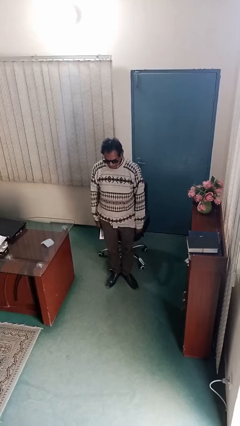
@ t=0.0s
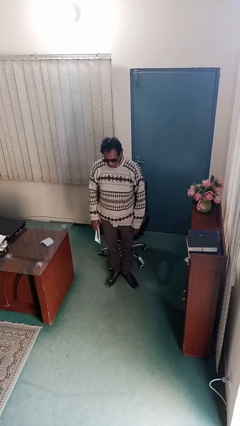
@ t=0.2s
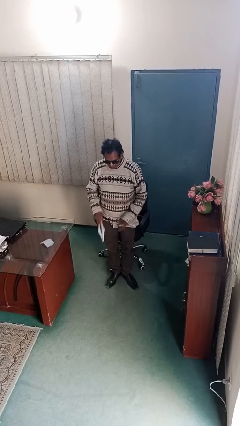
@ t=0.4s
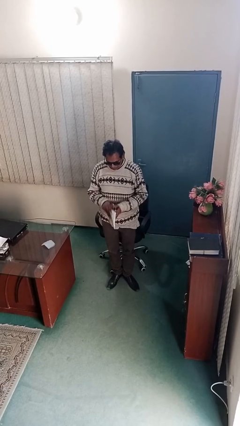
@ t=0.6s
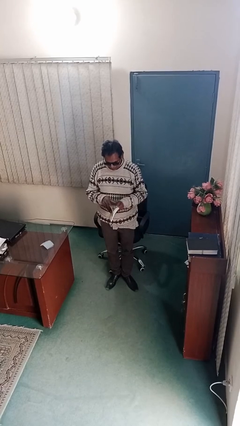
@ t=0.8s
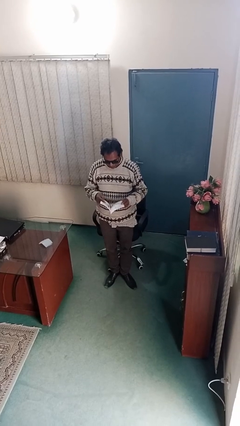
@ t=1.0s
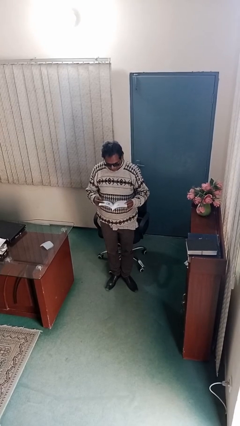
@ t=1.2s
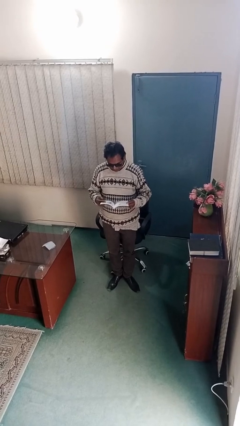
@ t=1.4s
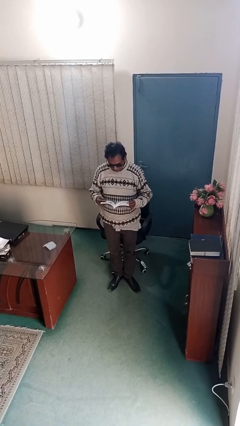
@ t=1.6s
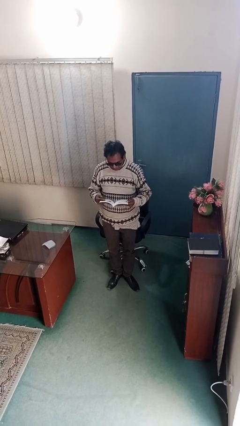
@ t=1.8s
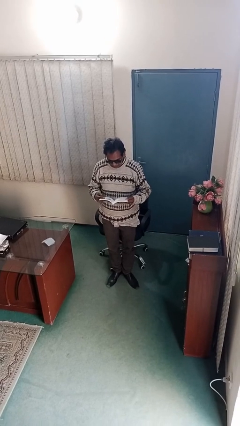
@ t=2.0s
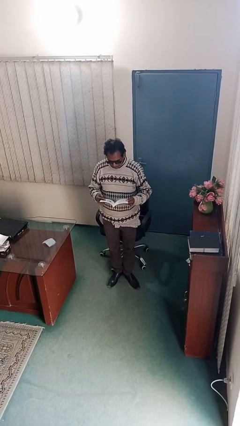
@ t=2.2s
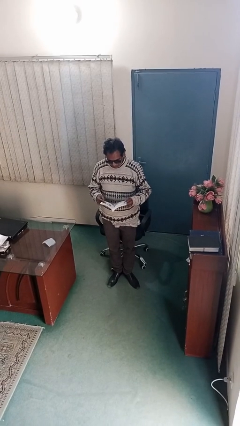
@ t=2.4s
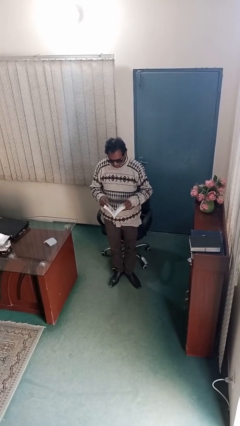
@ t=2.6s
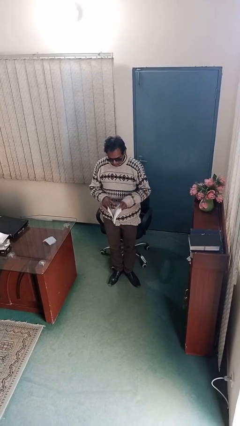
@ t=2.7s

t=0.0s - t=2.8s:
person reads document

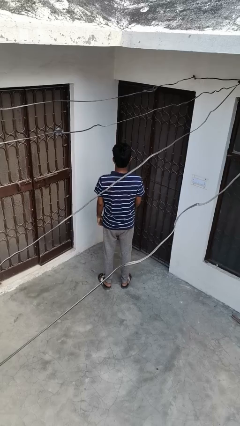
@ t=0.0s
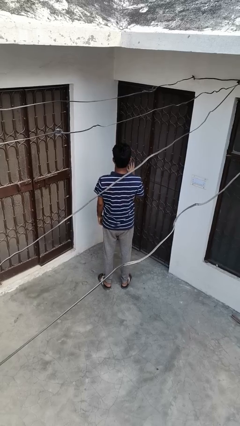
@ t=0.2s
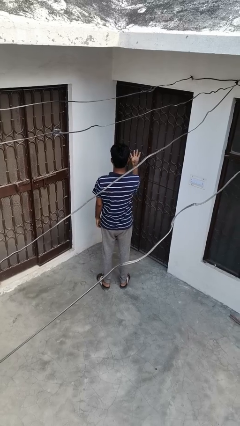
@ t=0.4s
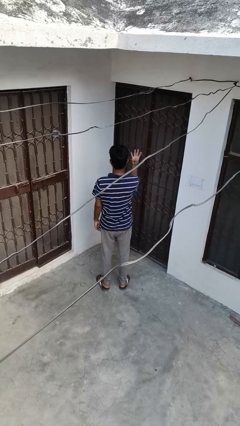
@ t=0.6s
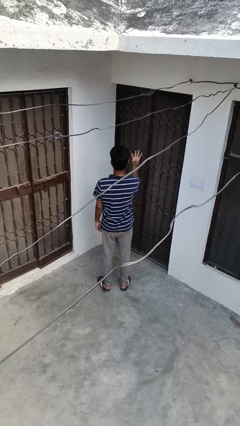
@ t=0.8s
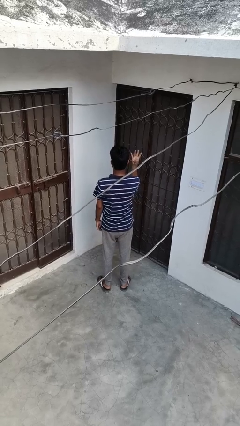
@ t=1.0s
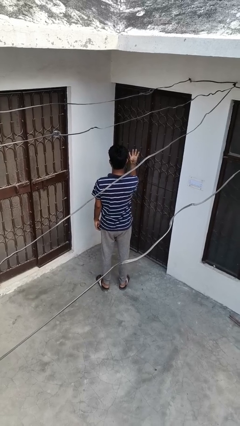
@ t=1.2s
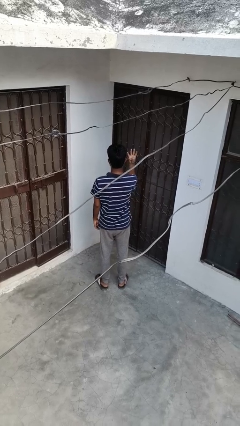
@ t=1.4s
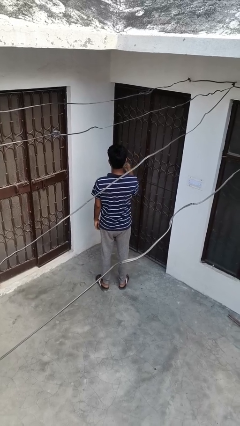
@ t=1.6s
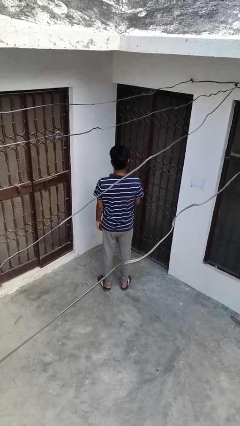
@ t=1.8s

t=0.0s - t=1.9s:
person gestures number four

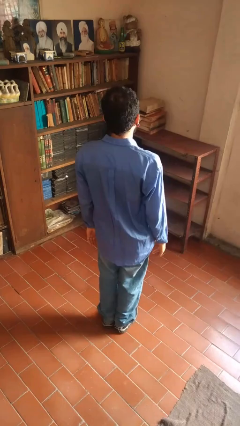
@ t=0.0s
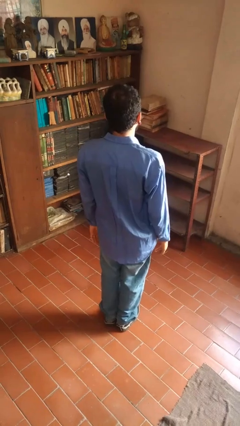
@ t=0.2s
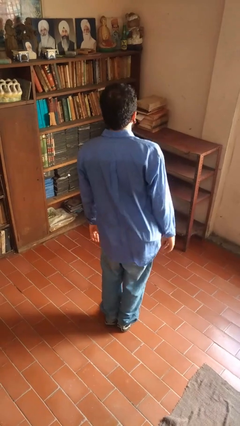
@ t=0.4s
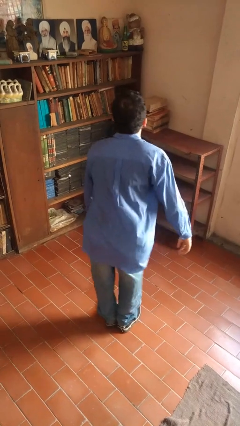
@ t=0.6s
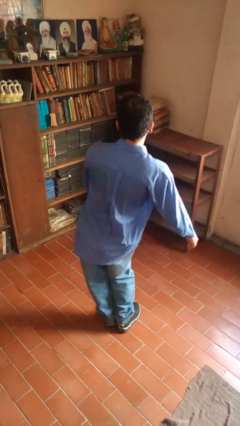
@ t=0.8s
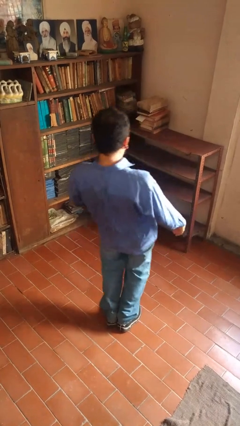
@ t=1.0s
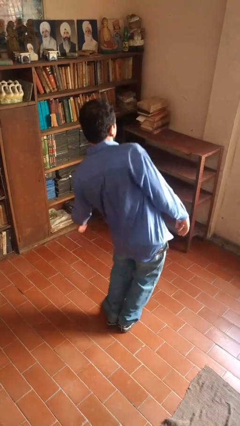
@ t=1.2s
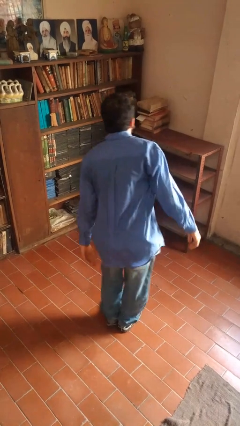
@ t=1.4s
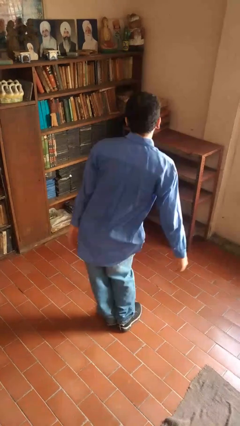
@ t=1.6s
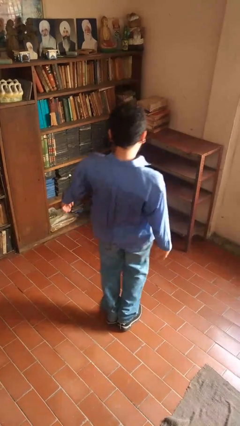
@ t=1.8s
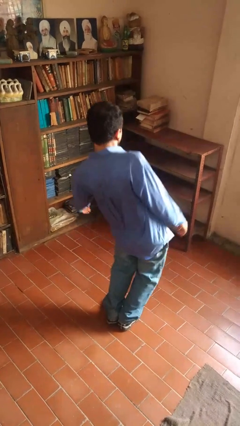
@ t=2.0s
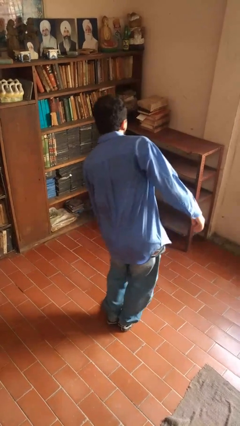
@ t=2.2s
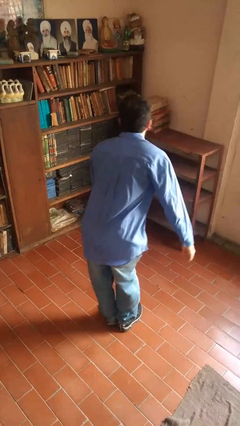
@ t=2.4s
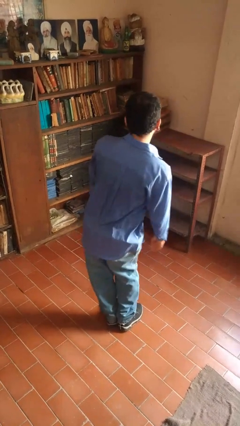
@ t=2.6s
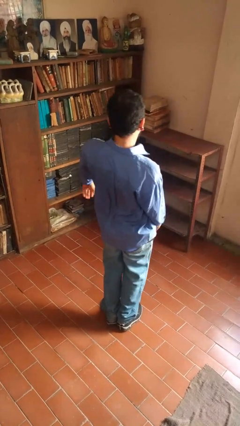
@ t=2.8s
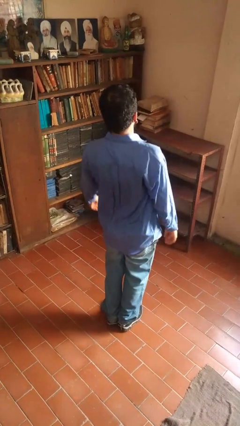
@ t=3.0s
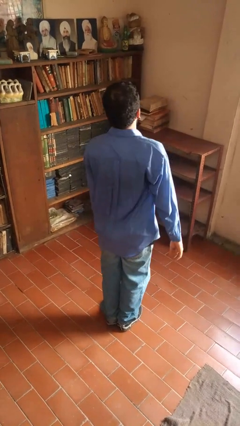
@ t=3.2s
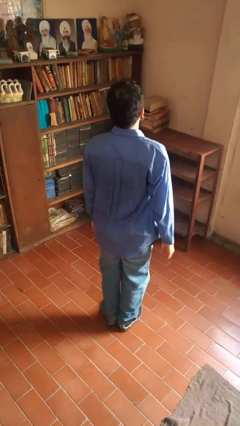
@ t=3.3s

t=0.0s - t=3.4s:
person wiggles hips

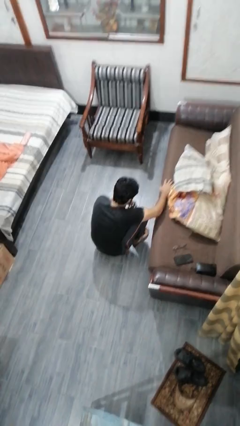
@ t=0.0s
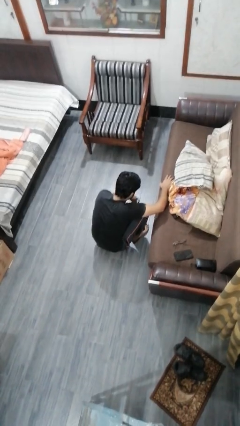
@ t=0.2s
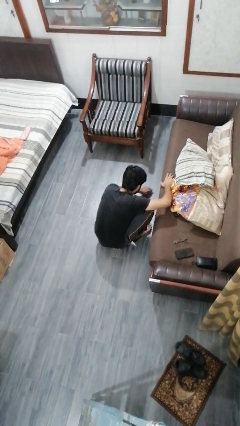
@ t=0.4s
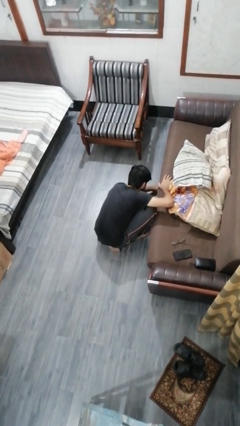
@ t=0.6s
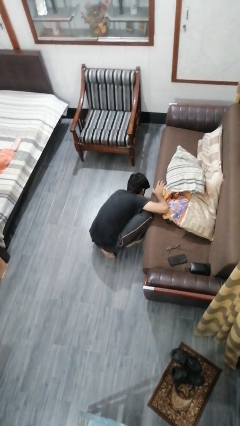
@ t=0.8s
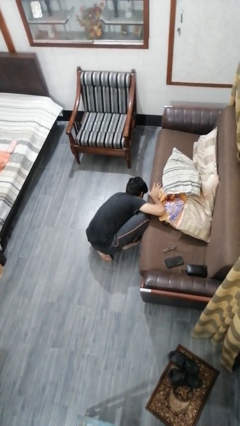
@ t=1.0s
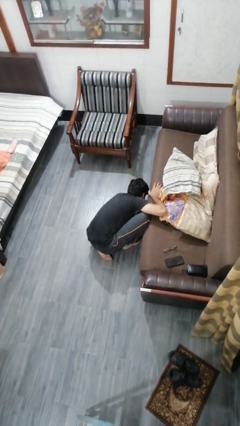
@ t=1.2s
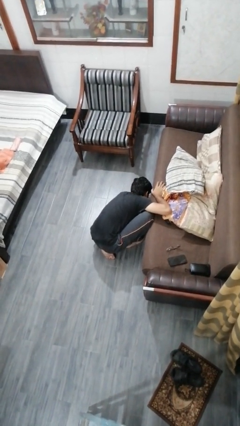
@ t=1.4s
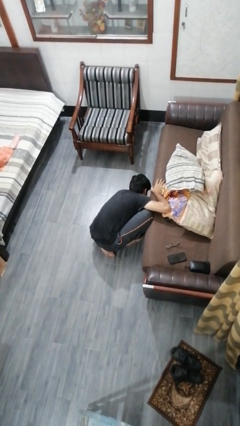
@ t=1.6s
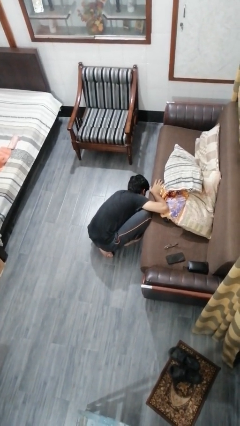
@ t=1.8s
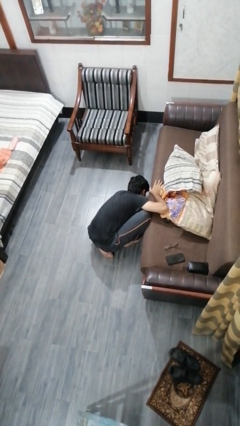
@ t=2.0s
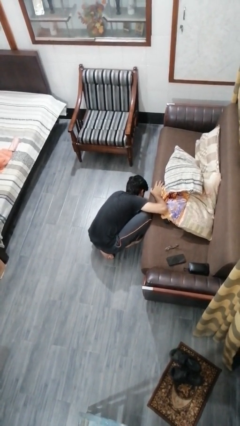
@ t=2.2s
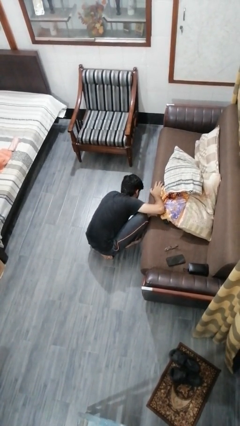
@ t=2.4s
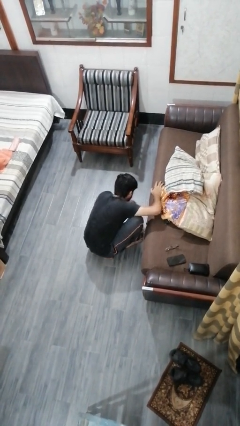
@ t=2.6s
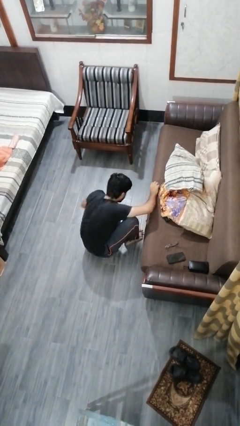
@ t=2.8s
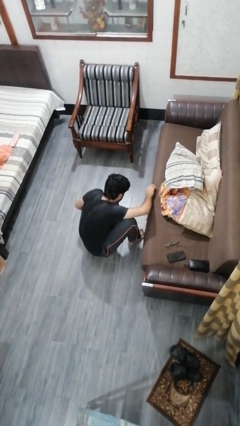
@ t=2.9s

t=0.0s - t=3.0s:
person searches under couch

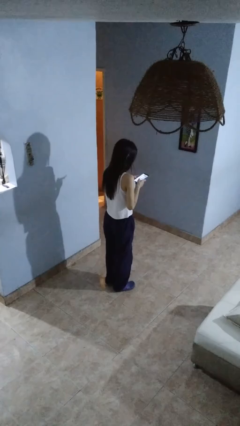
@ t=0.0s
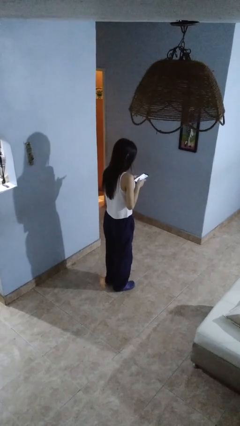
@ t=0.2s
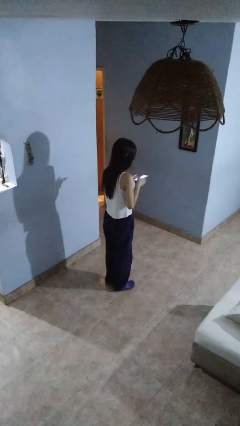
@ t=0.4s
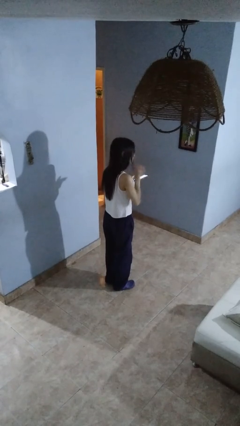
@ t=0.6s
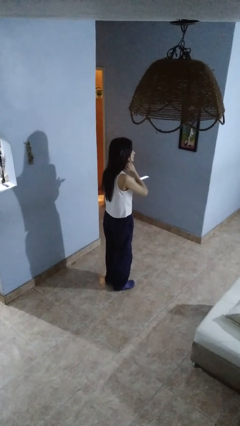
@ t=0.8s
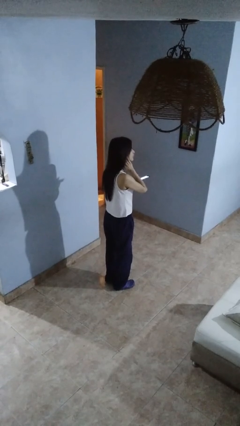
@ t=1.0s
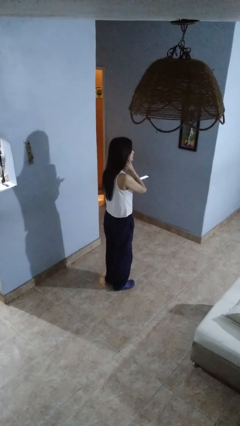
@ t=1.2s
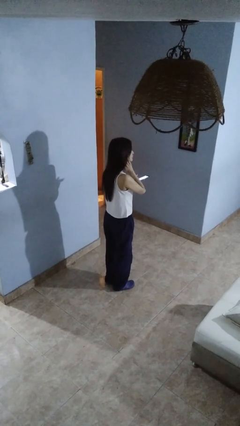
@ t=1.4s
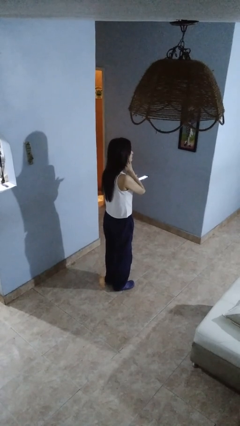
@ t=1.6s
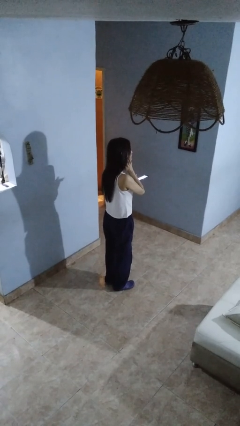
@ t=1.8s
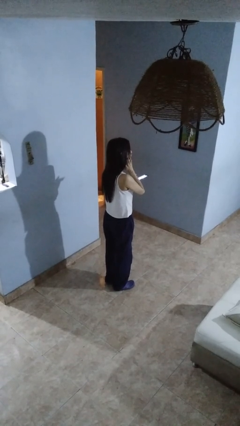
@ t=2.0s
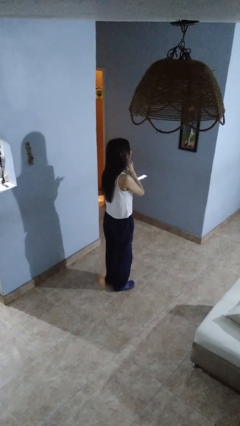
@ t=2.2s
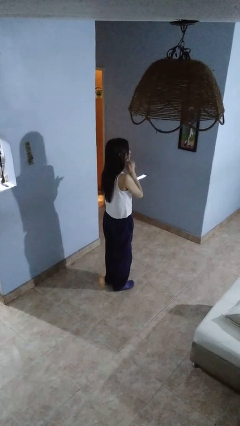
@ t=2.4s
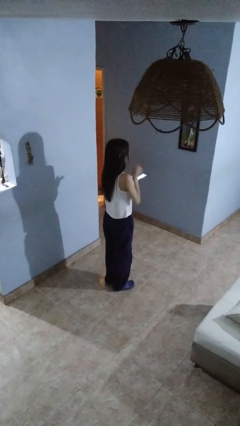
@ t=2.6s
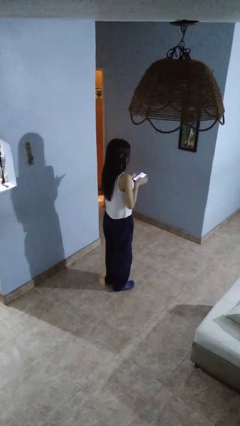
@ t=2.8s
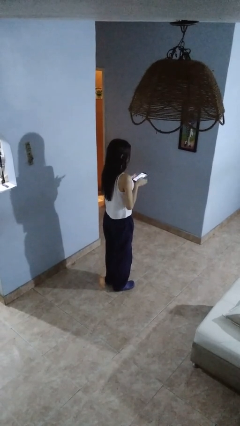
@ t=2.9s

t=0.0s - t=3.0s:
person scratches face

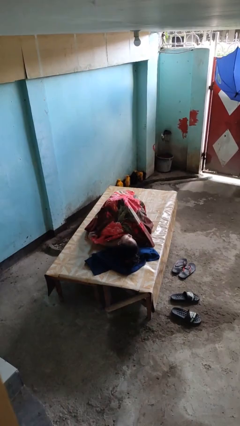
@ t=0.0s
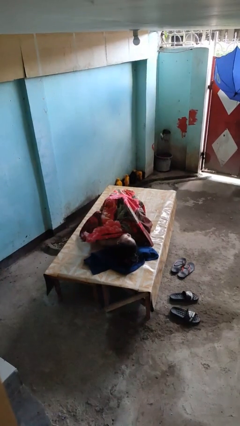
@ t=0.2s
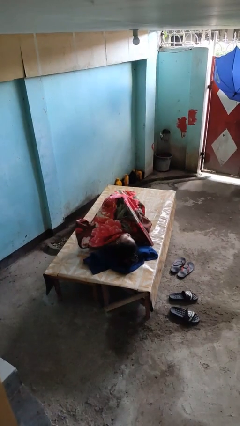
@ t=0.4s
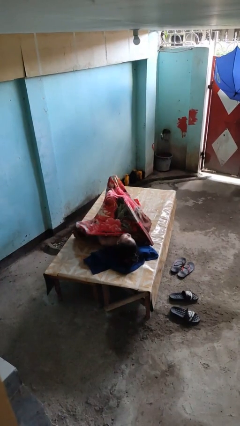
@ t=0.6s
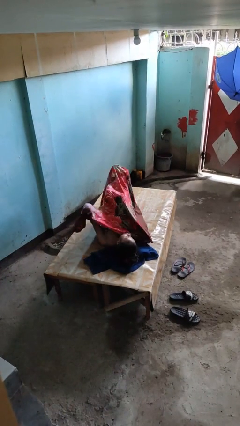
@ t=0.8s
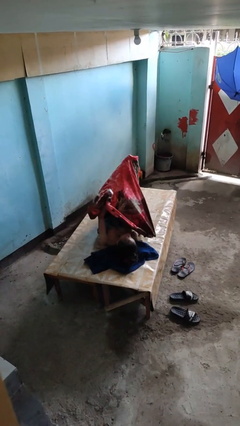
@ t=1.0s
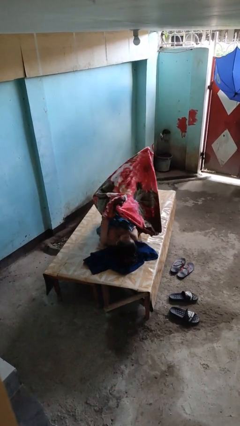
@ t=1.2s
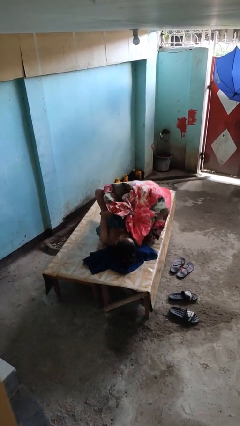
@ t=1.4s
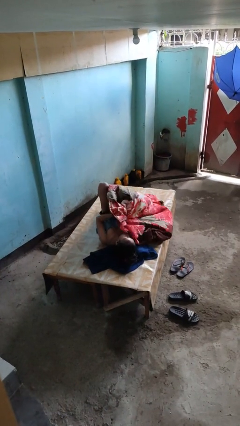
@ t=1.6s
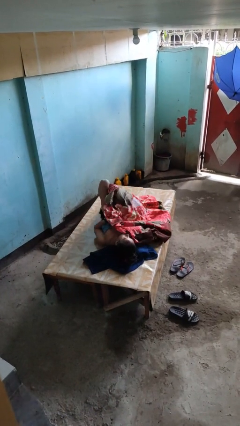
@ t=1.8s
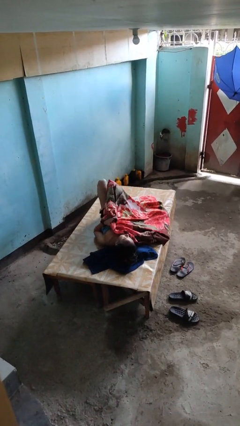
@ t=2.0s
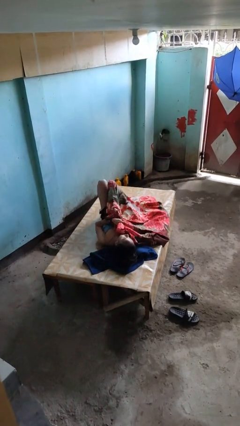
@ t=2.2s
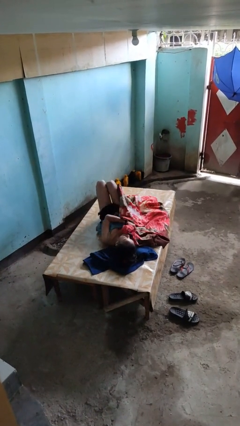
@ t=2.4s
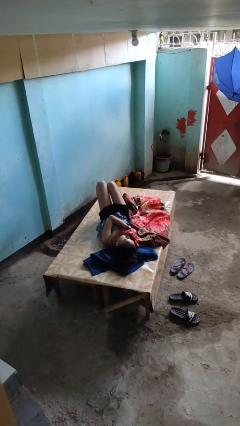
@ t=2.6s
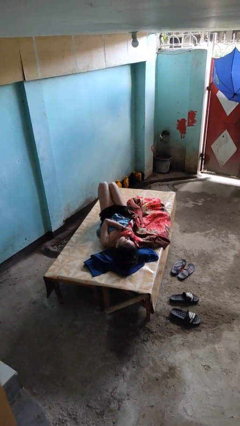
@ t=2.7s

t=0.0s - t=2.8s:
person uncovers with blanket

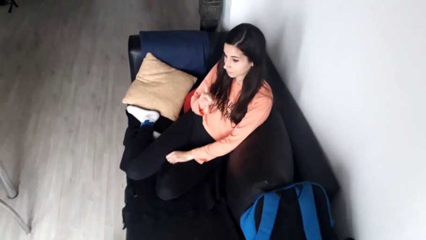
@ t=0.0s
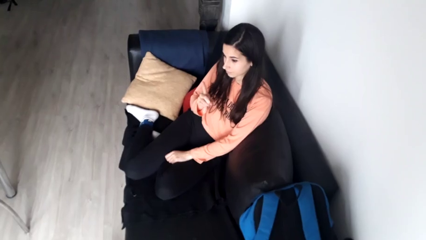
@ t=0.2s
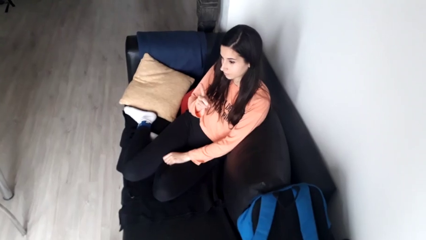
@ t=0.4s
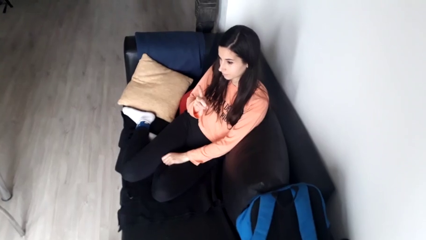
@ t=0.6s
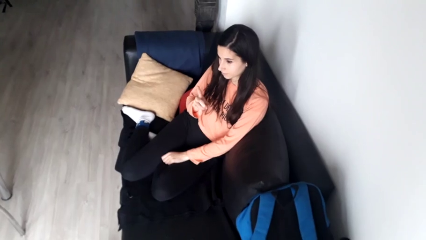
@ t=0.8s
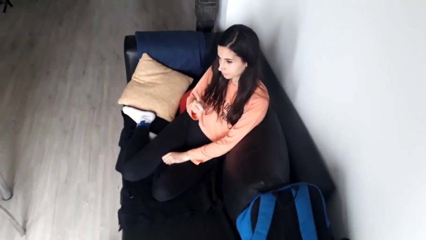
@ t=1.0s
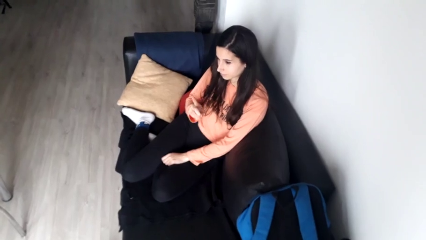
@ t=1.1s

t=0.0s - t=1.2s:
person gestures number one
